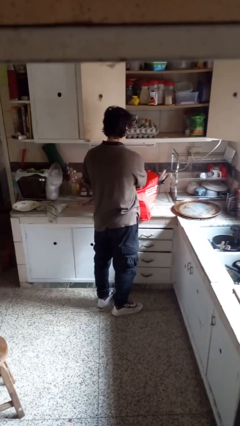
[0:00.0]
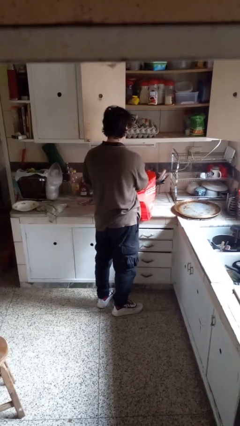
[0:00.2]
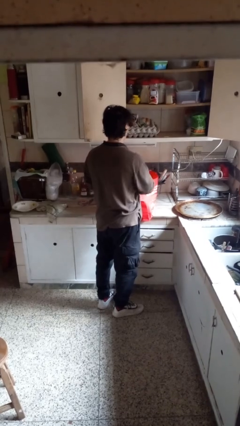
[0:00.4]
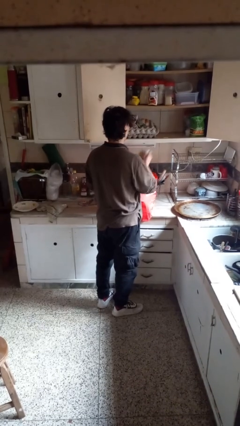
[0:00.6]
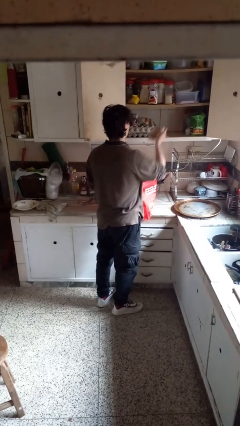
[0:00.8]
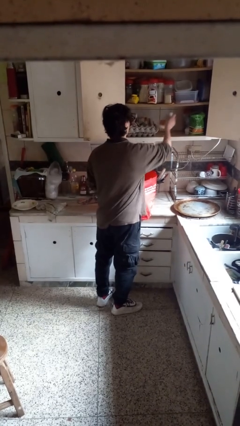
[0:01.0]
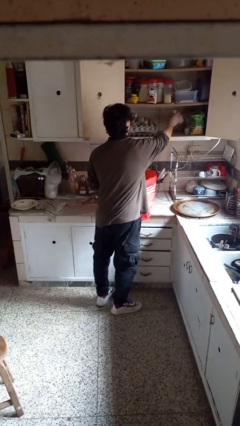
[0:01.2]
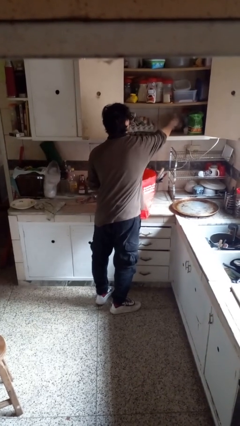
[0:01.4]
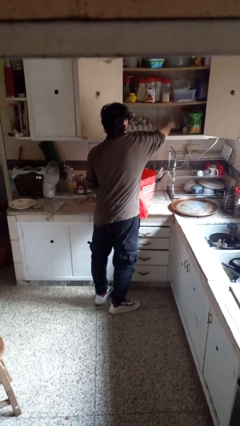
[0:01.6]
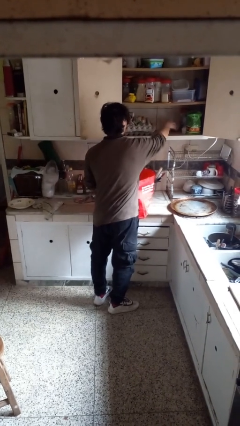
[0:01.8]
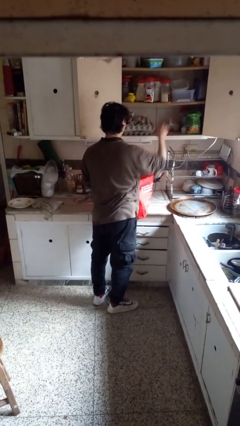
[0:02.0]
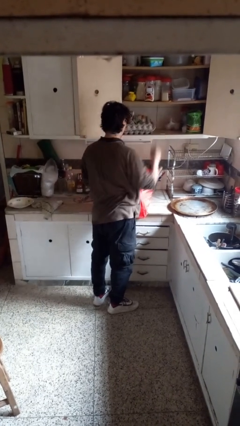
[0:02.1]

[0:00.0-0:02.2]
person loads groceries into cabinet

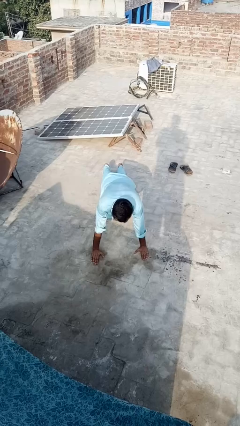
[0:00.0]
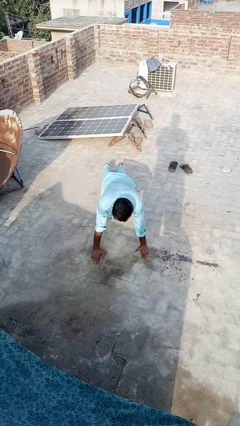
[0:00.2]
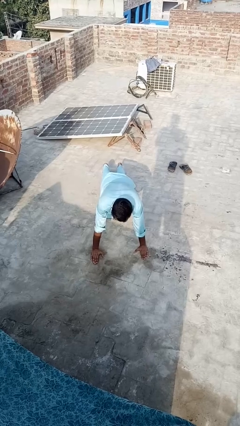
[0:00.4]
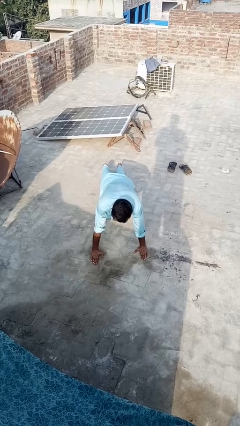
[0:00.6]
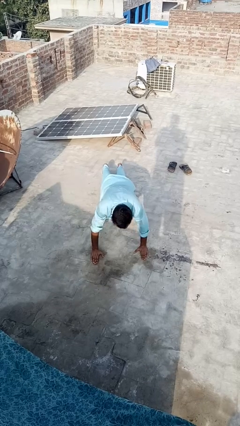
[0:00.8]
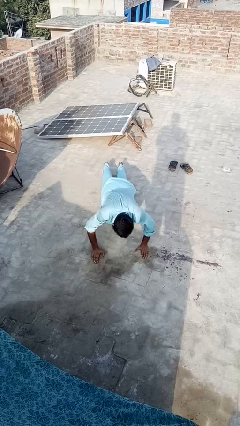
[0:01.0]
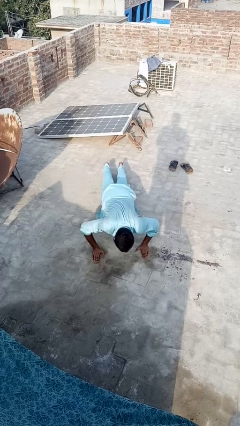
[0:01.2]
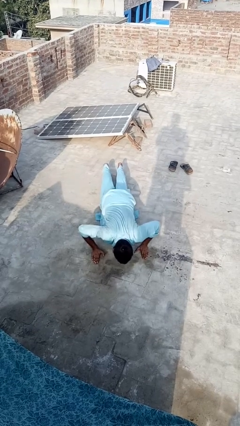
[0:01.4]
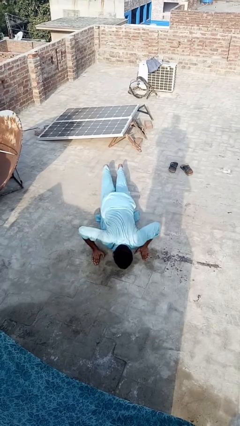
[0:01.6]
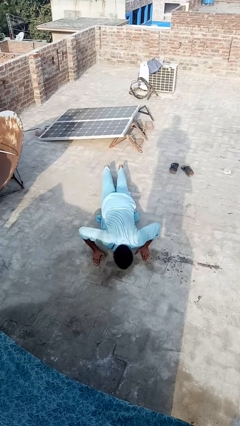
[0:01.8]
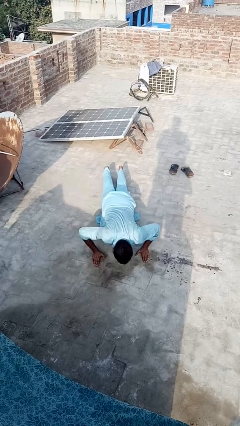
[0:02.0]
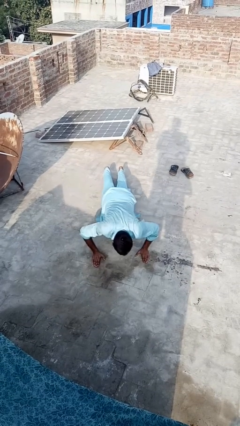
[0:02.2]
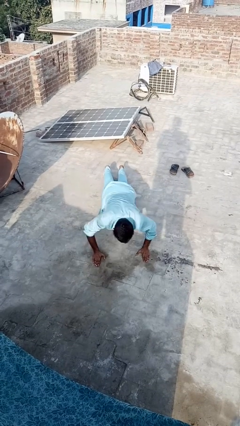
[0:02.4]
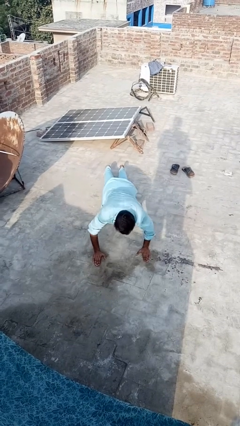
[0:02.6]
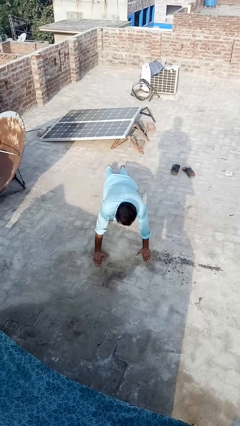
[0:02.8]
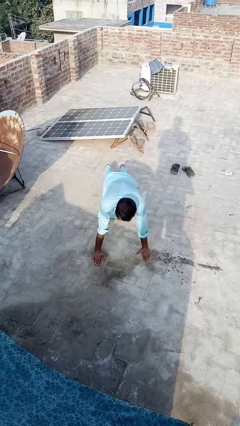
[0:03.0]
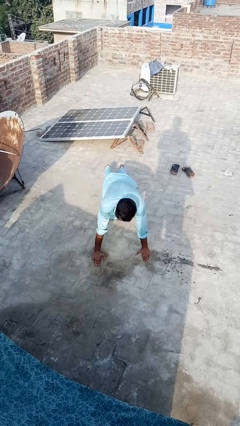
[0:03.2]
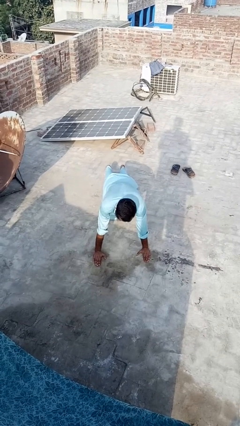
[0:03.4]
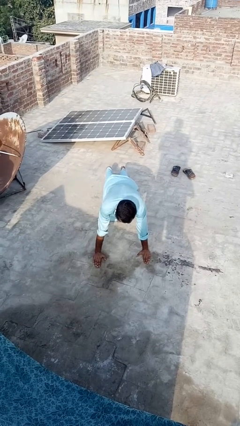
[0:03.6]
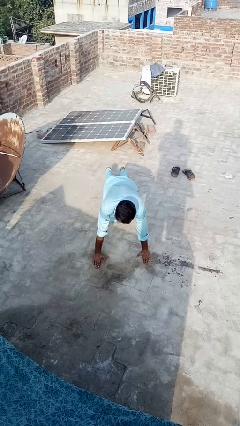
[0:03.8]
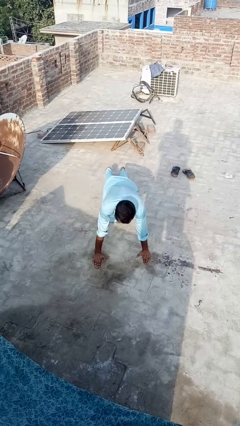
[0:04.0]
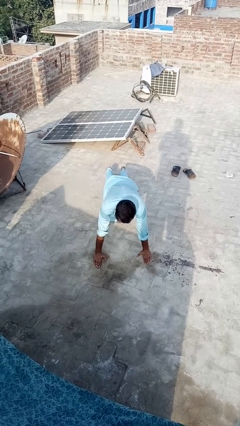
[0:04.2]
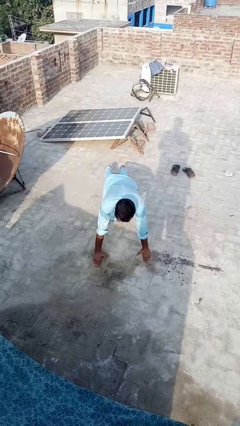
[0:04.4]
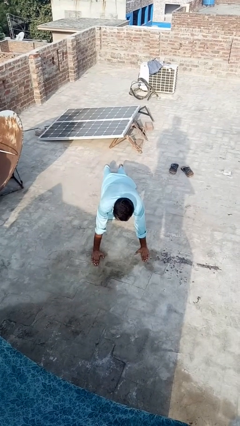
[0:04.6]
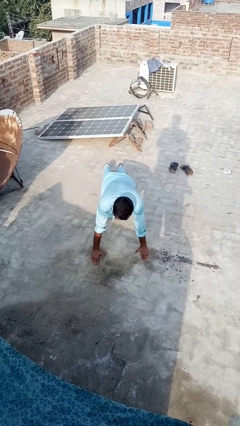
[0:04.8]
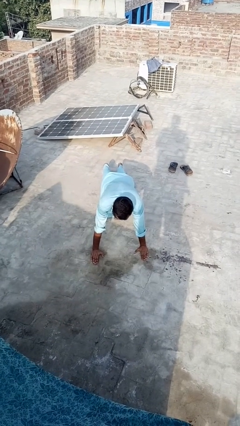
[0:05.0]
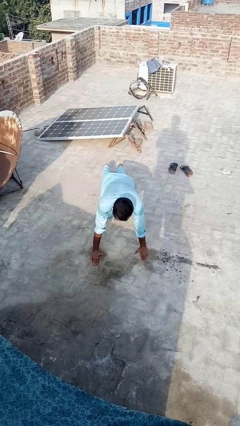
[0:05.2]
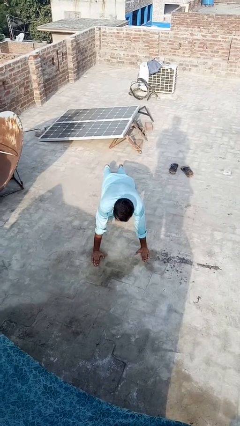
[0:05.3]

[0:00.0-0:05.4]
person exercises with pushup

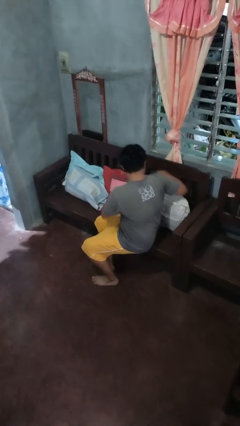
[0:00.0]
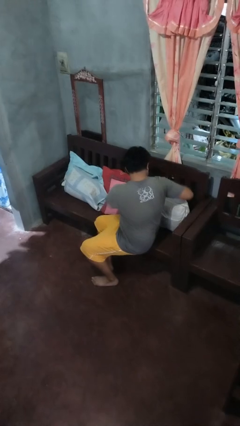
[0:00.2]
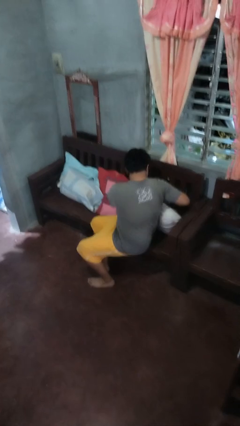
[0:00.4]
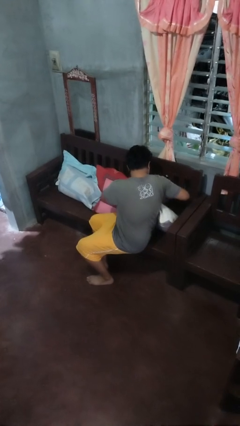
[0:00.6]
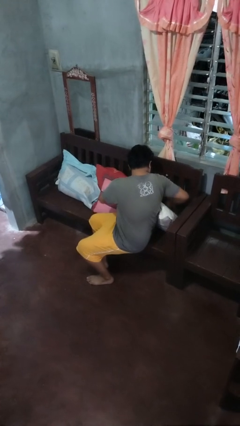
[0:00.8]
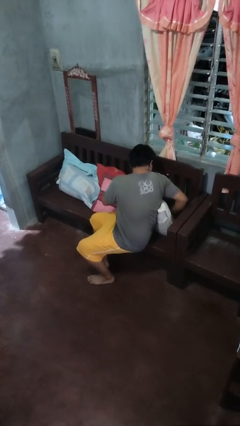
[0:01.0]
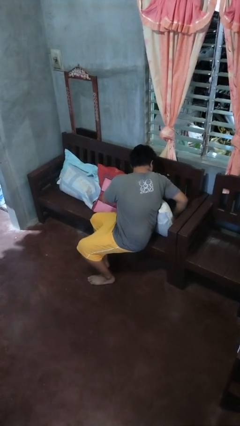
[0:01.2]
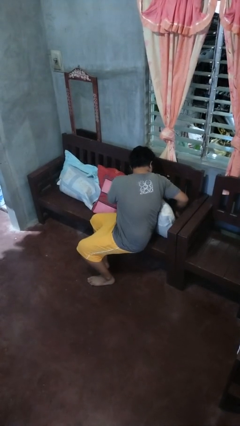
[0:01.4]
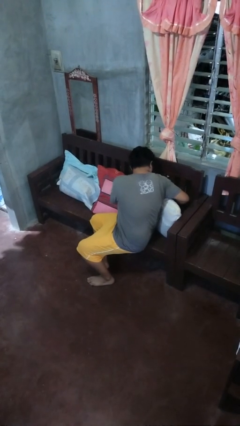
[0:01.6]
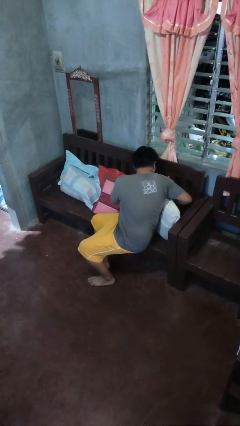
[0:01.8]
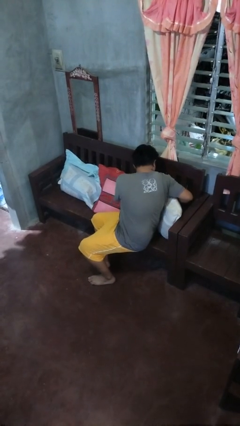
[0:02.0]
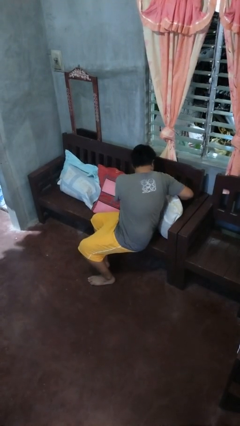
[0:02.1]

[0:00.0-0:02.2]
person searches in couch

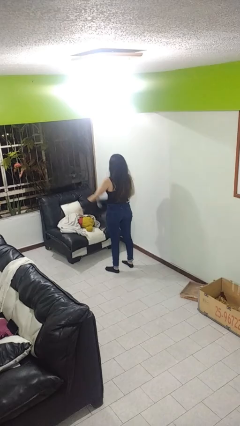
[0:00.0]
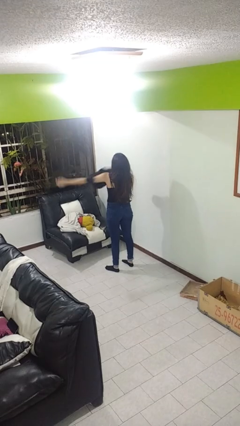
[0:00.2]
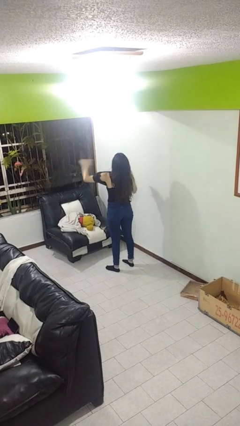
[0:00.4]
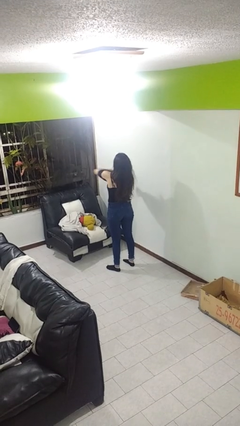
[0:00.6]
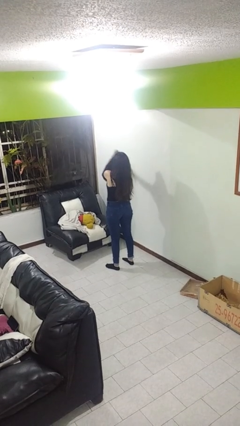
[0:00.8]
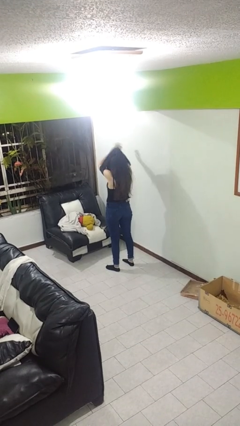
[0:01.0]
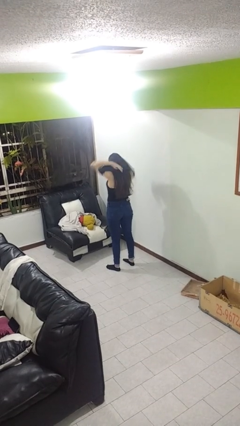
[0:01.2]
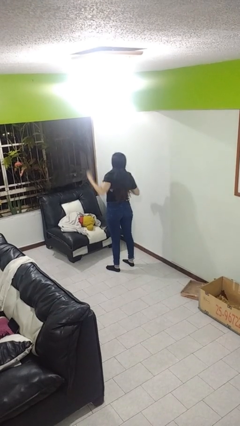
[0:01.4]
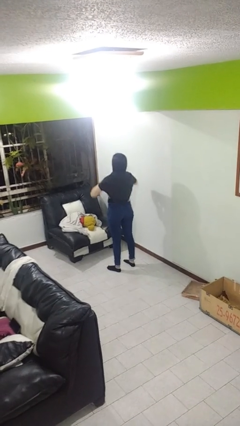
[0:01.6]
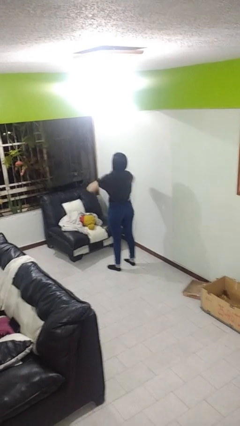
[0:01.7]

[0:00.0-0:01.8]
person puts on shirt

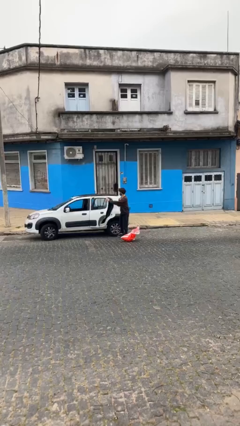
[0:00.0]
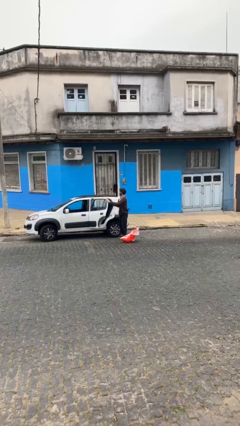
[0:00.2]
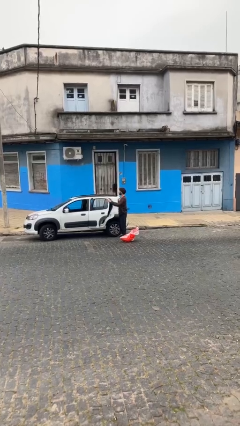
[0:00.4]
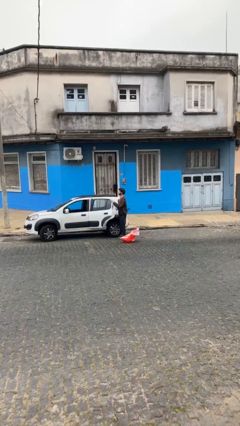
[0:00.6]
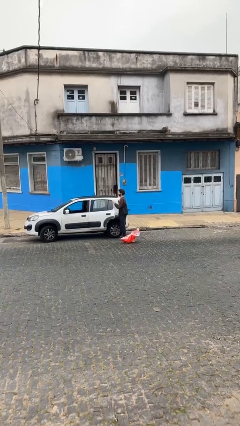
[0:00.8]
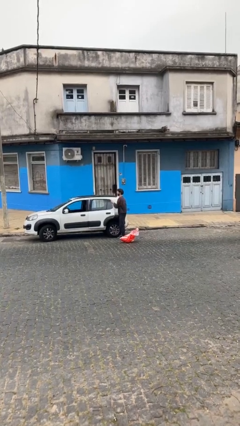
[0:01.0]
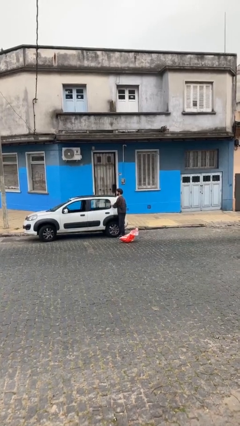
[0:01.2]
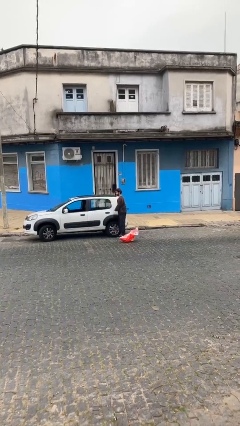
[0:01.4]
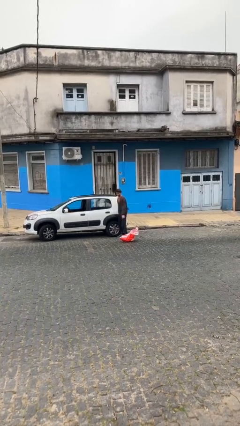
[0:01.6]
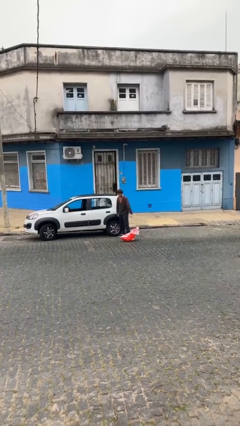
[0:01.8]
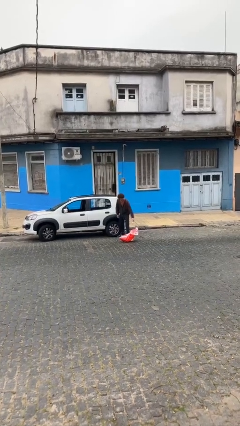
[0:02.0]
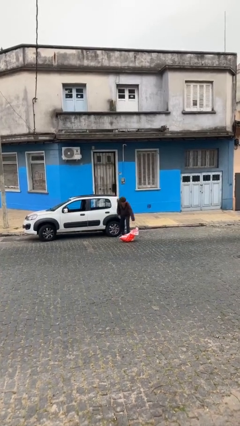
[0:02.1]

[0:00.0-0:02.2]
person closes car door

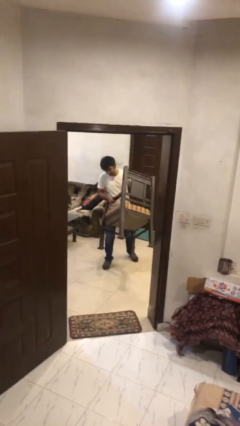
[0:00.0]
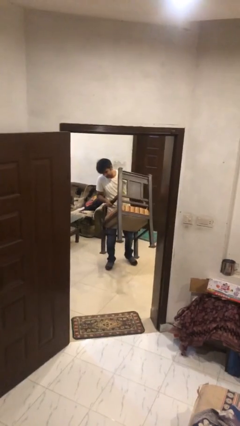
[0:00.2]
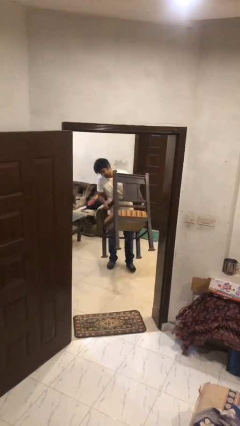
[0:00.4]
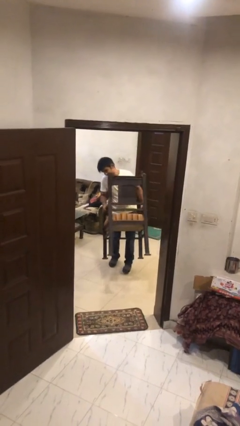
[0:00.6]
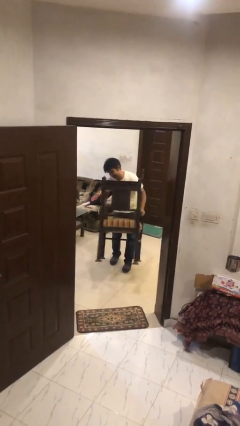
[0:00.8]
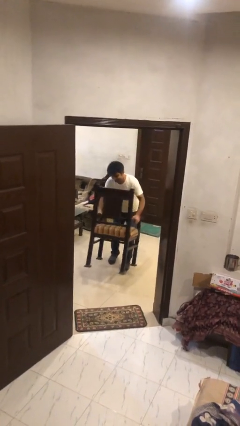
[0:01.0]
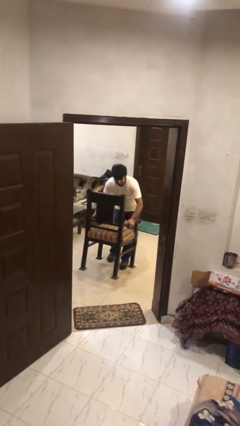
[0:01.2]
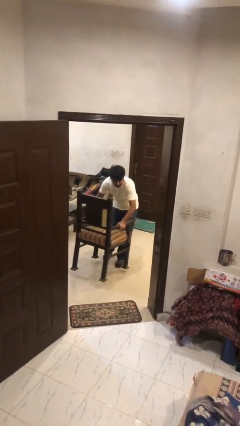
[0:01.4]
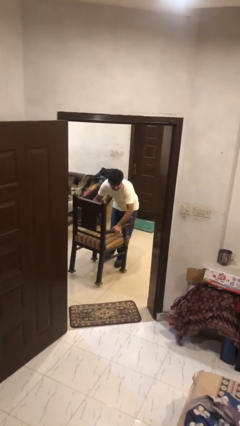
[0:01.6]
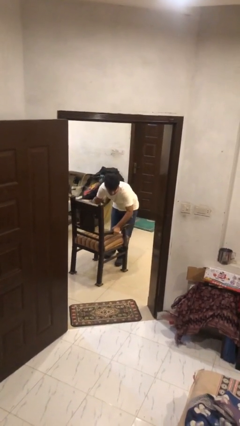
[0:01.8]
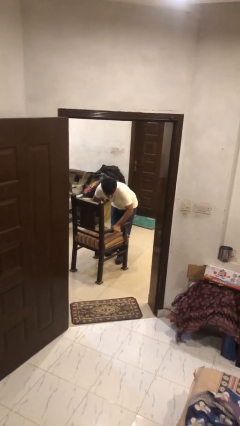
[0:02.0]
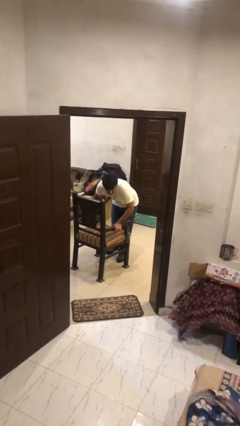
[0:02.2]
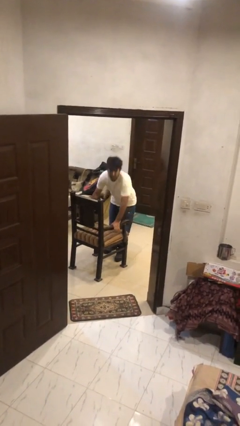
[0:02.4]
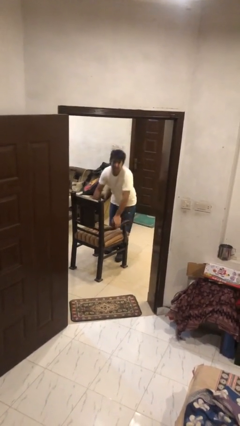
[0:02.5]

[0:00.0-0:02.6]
person puts down object on floor

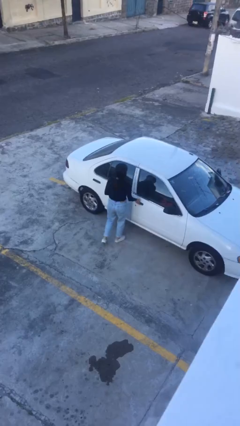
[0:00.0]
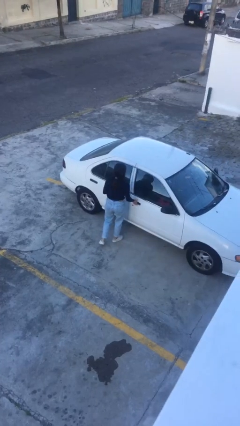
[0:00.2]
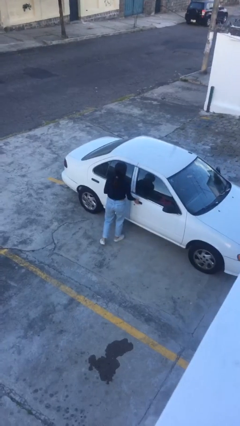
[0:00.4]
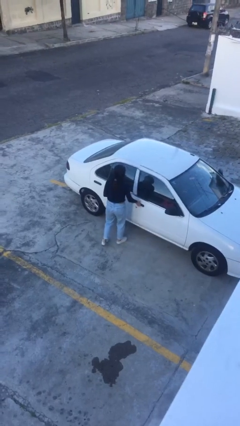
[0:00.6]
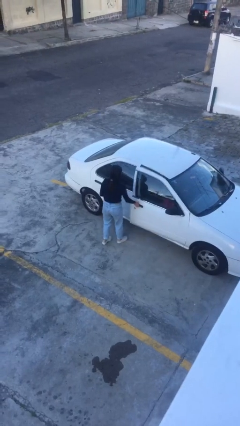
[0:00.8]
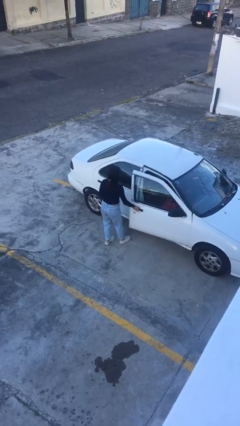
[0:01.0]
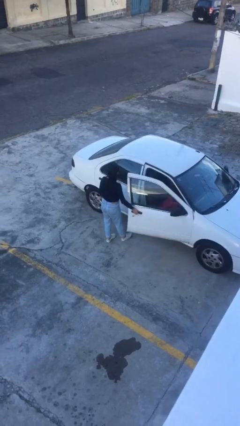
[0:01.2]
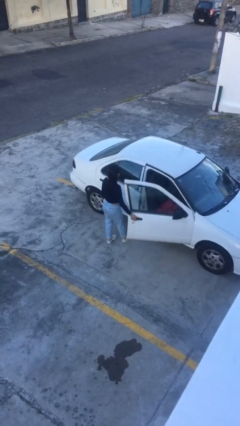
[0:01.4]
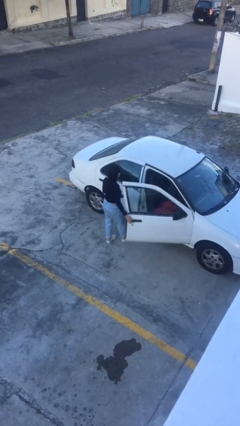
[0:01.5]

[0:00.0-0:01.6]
person opens car door
